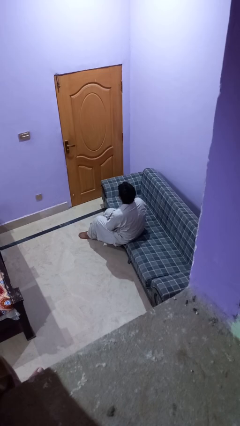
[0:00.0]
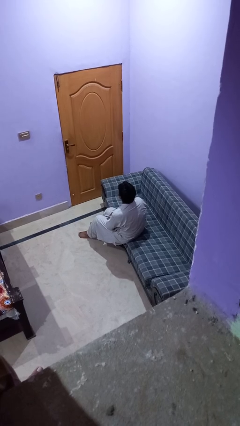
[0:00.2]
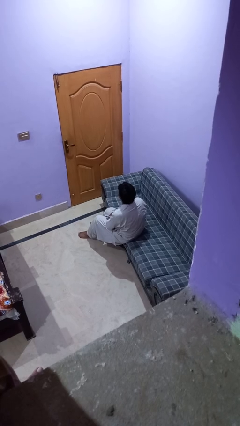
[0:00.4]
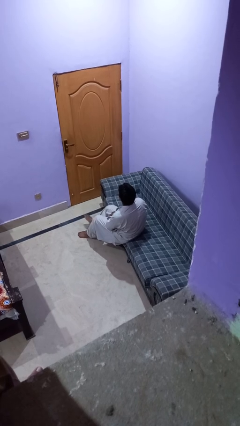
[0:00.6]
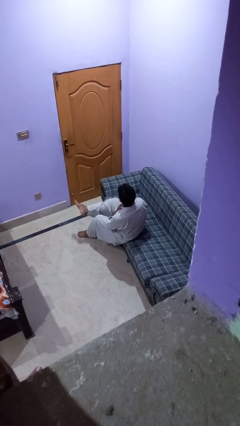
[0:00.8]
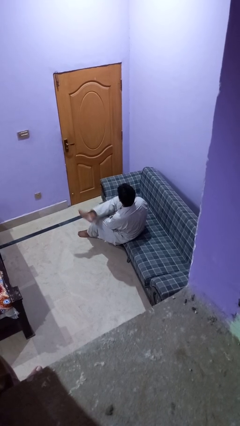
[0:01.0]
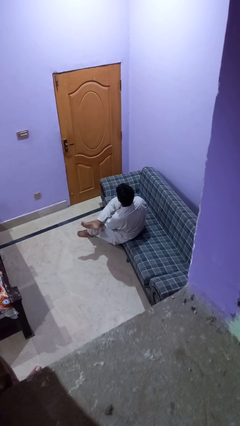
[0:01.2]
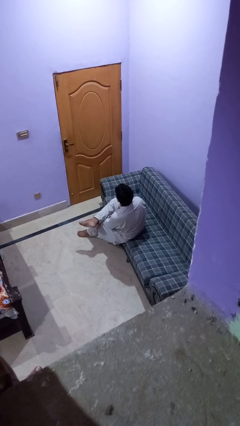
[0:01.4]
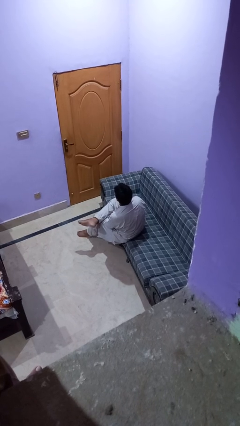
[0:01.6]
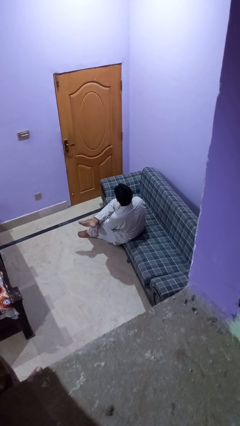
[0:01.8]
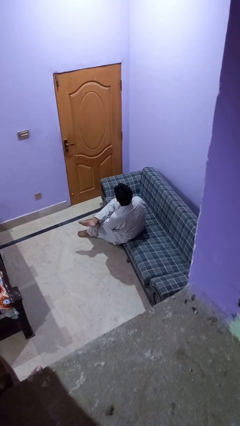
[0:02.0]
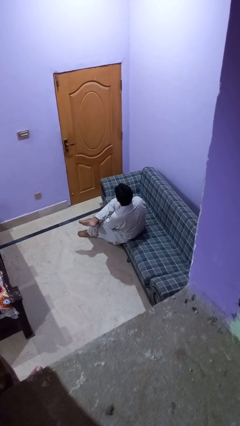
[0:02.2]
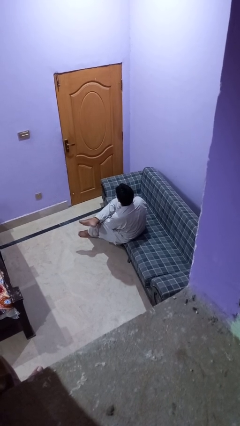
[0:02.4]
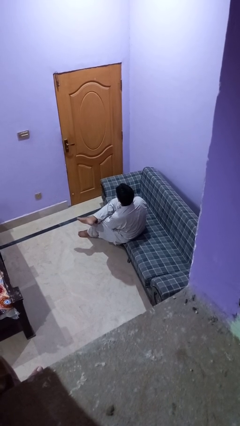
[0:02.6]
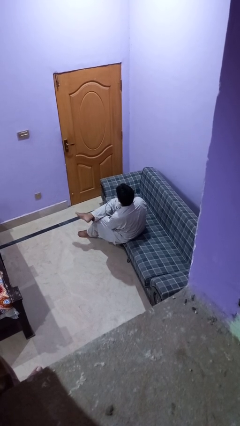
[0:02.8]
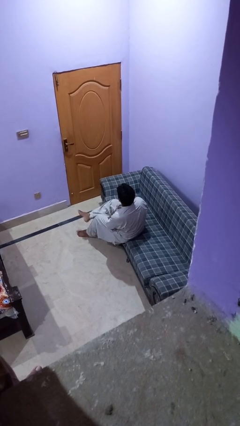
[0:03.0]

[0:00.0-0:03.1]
person crosses legs

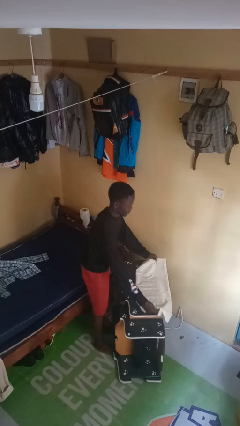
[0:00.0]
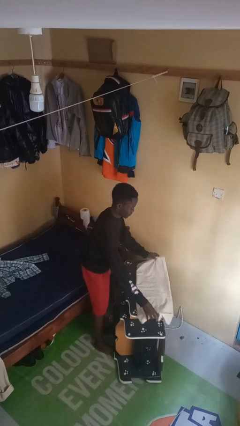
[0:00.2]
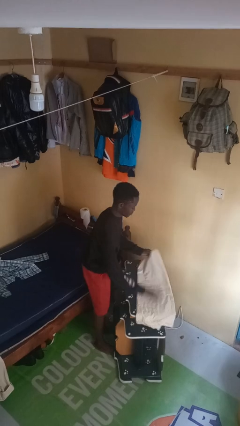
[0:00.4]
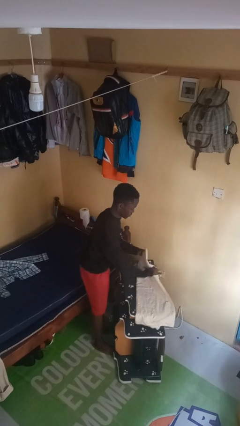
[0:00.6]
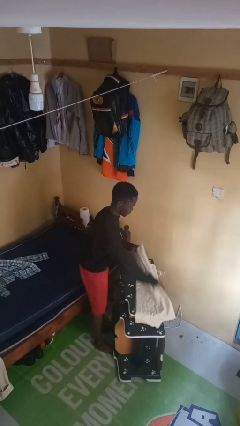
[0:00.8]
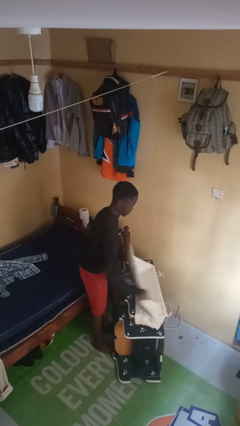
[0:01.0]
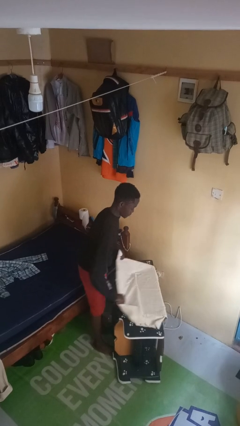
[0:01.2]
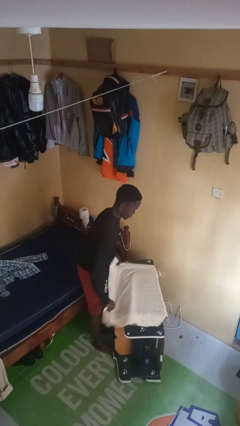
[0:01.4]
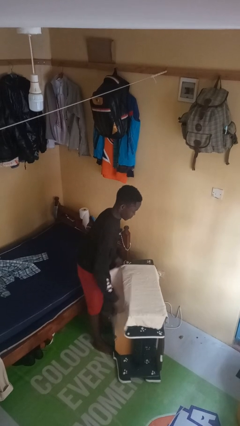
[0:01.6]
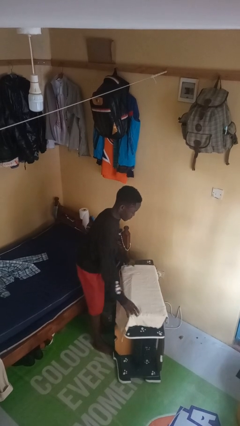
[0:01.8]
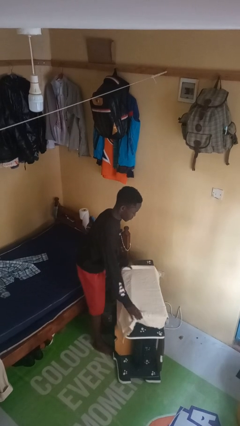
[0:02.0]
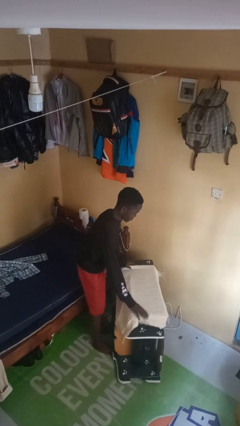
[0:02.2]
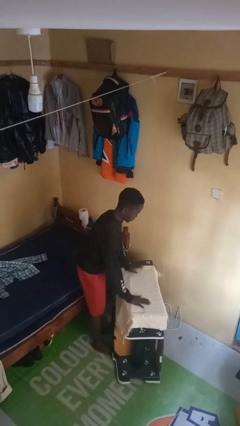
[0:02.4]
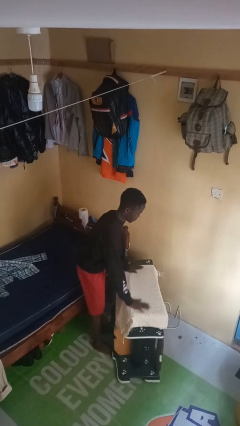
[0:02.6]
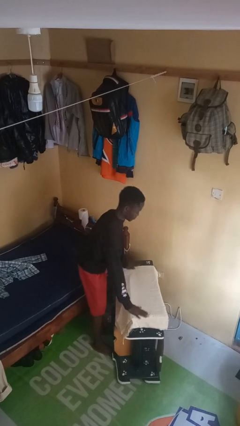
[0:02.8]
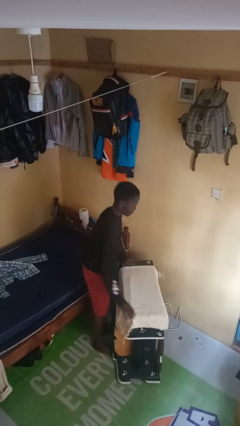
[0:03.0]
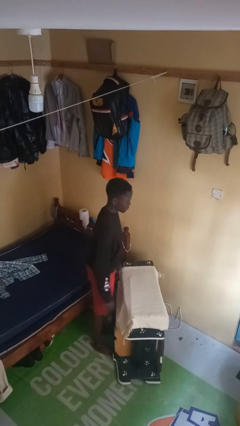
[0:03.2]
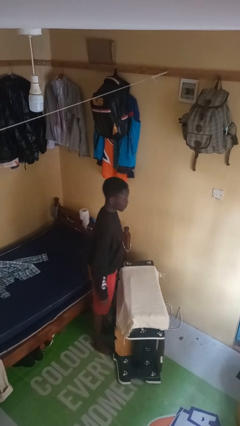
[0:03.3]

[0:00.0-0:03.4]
person spreads tablecloth

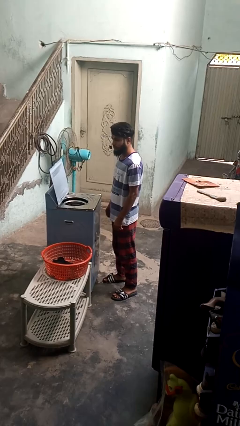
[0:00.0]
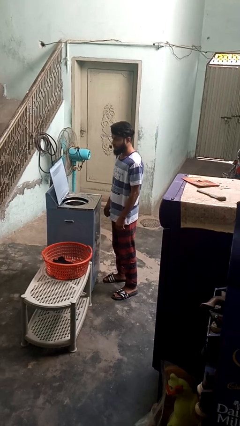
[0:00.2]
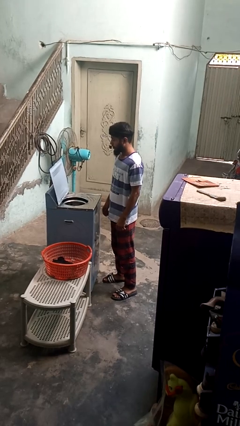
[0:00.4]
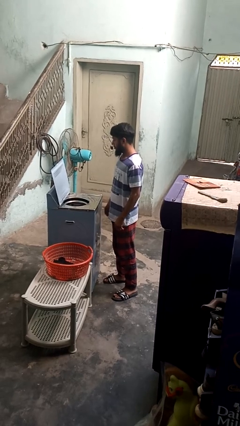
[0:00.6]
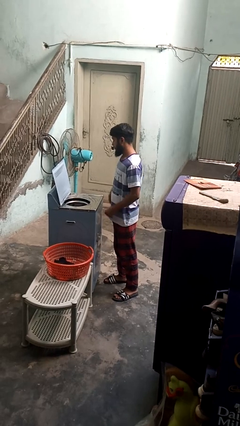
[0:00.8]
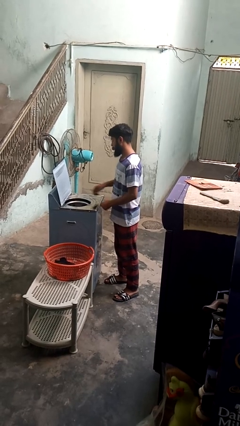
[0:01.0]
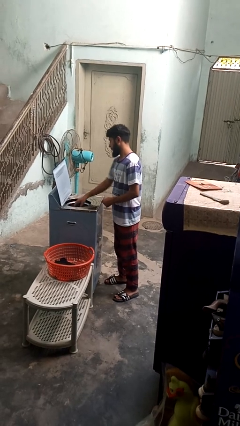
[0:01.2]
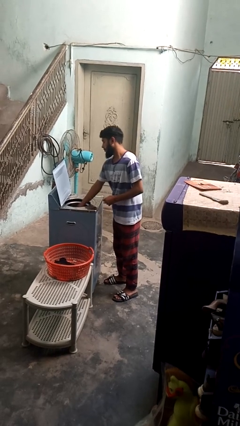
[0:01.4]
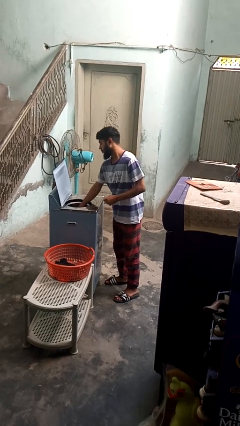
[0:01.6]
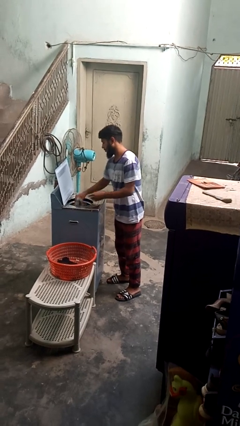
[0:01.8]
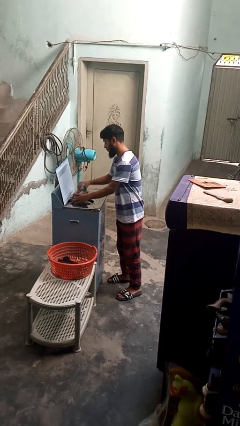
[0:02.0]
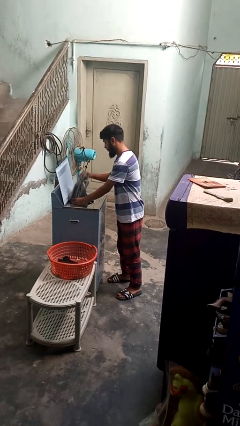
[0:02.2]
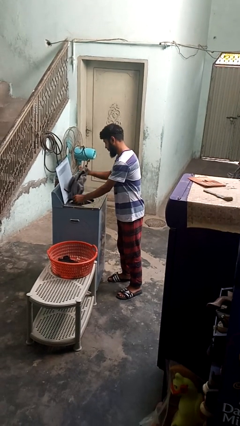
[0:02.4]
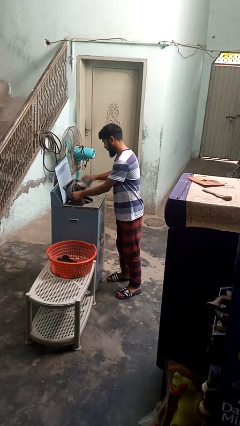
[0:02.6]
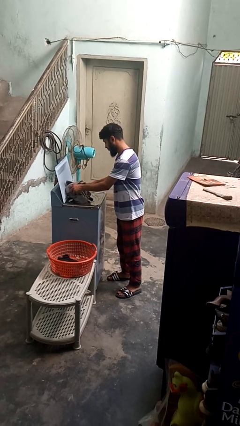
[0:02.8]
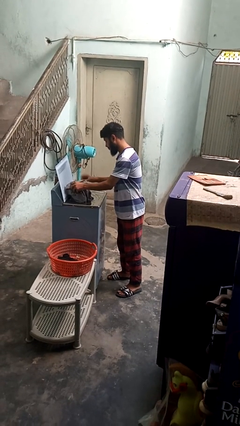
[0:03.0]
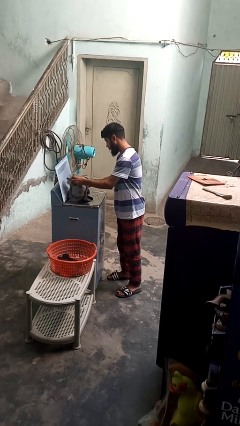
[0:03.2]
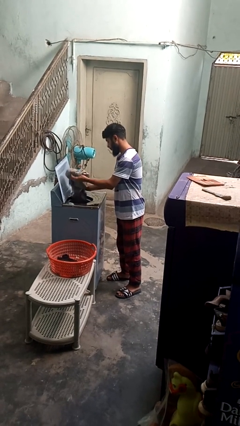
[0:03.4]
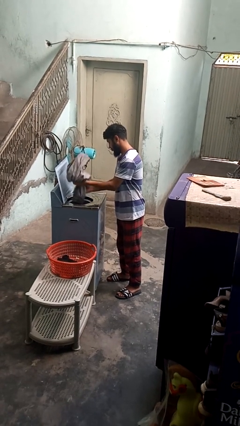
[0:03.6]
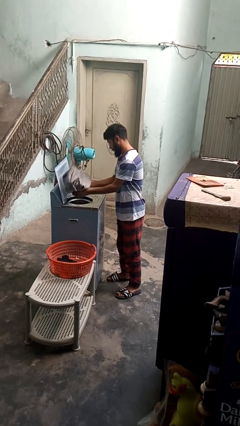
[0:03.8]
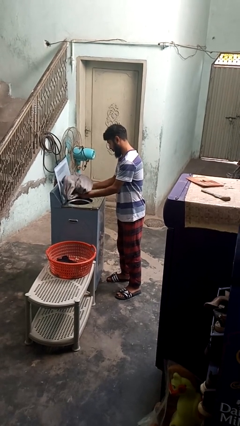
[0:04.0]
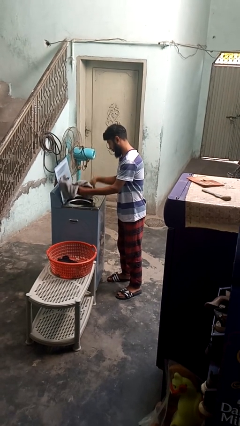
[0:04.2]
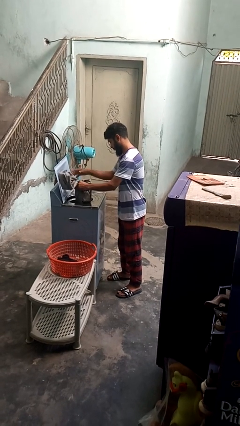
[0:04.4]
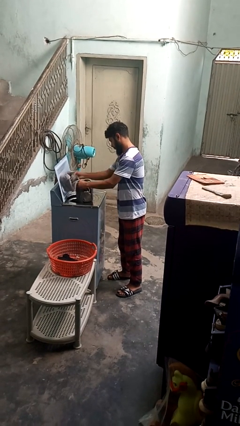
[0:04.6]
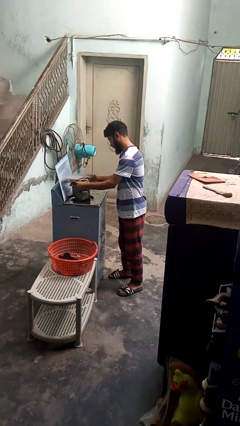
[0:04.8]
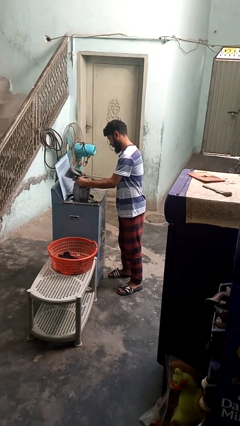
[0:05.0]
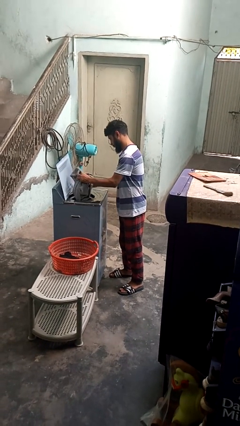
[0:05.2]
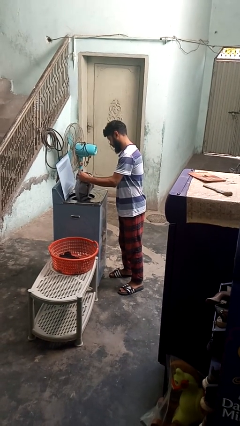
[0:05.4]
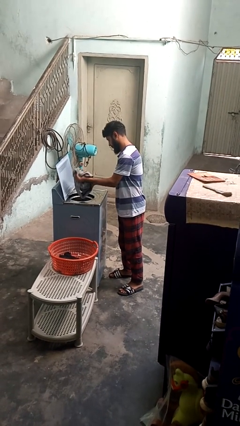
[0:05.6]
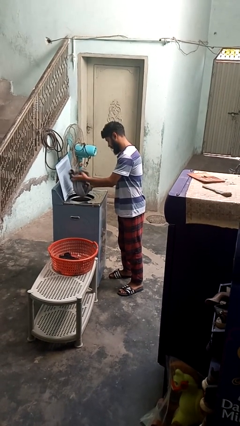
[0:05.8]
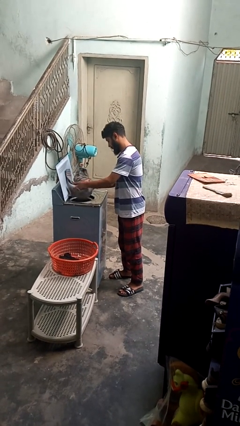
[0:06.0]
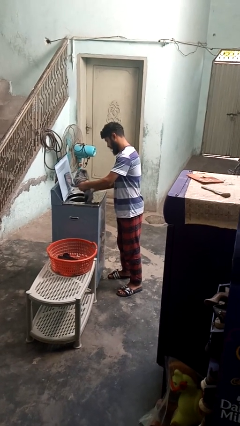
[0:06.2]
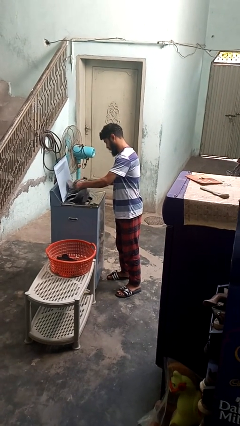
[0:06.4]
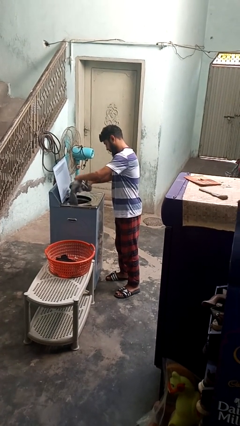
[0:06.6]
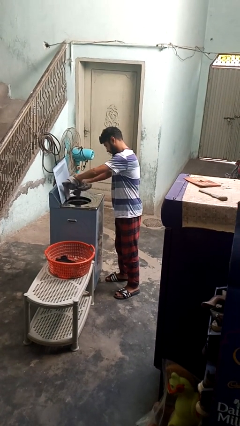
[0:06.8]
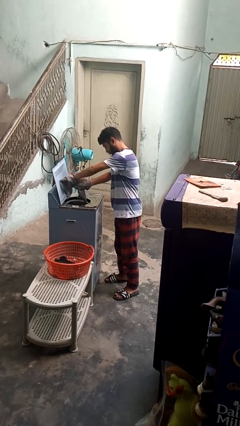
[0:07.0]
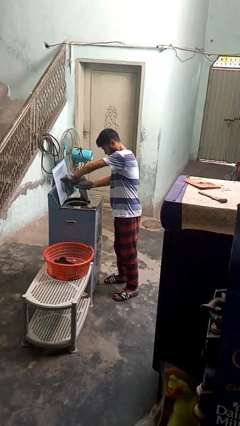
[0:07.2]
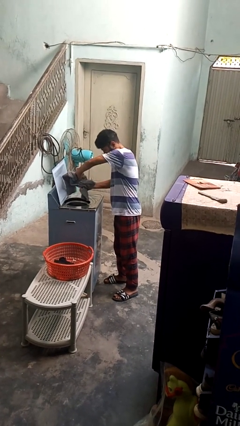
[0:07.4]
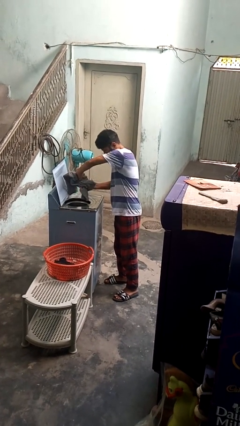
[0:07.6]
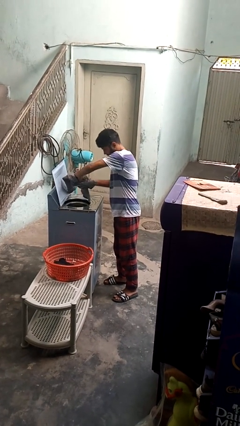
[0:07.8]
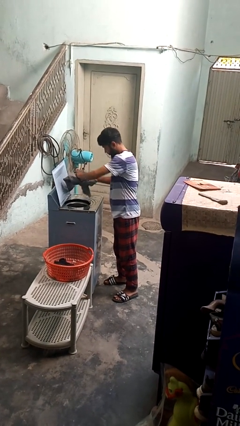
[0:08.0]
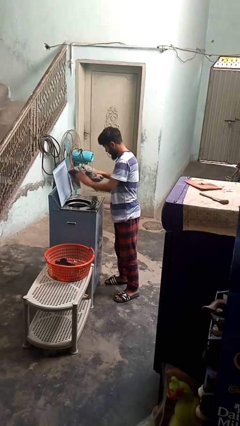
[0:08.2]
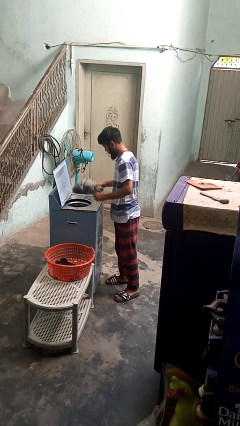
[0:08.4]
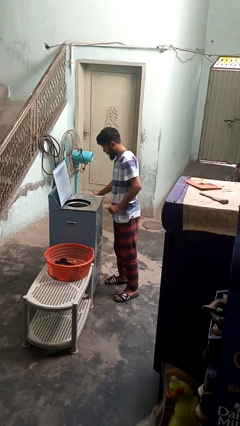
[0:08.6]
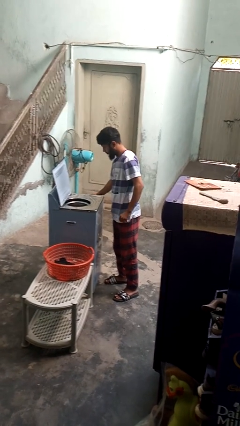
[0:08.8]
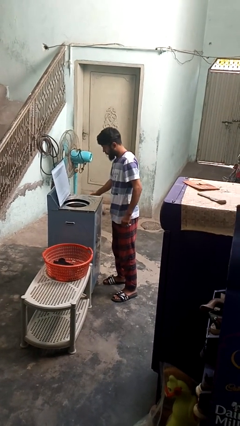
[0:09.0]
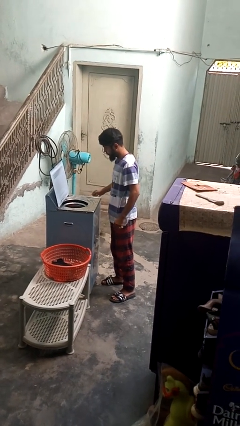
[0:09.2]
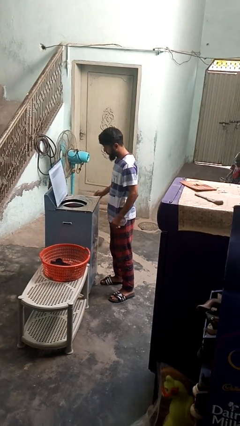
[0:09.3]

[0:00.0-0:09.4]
person unloads clotheswasher

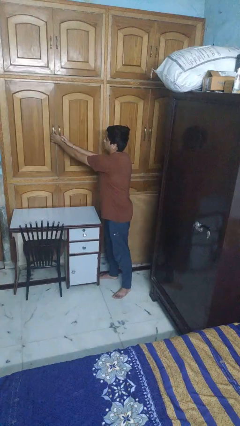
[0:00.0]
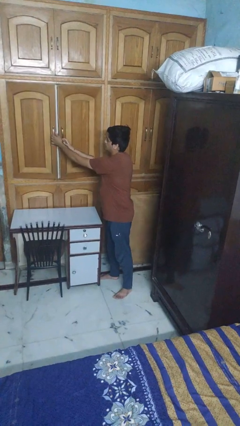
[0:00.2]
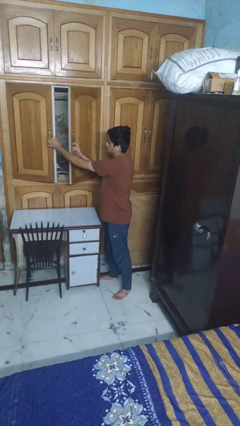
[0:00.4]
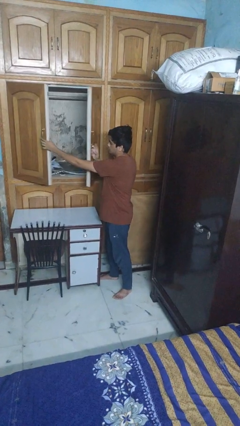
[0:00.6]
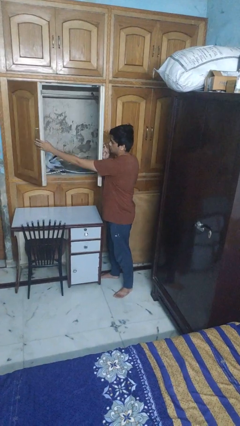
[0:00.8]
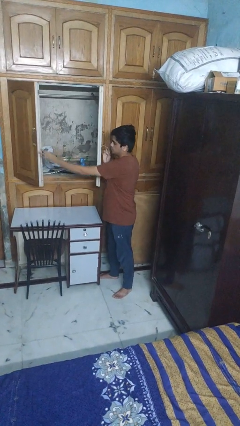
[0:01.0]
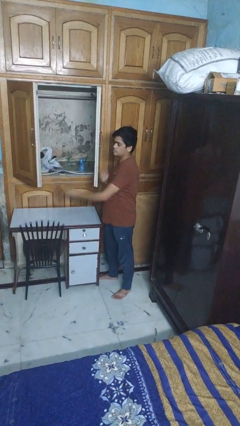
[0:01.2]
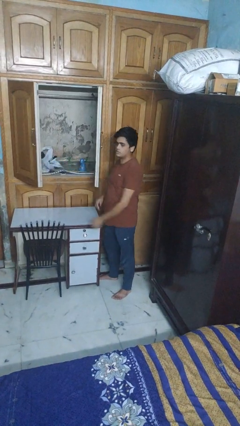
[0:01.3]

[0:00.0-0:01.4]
person opens closet door

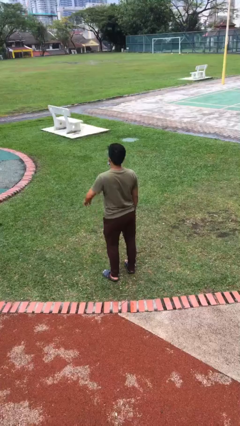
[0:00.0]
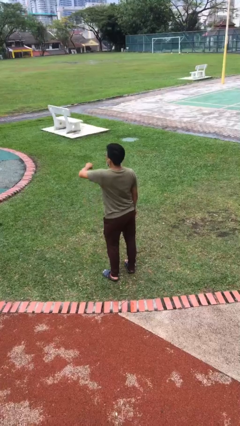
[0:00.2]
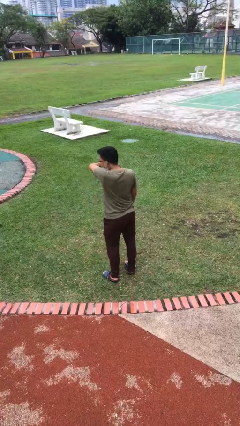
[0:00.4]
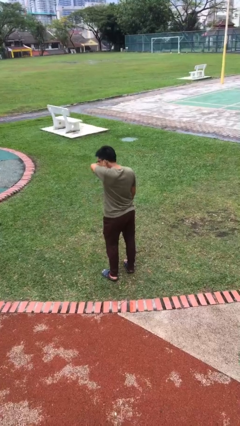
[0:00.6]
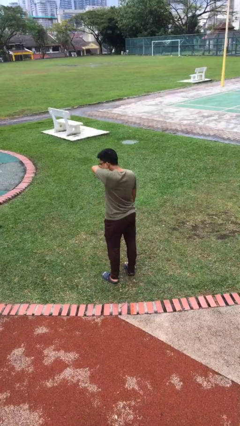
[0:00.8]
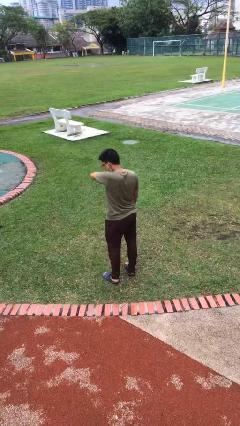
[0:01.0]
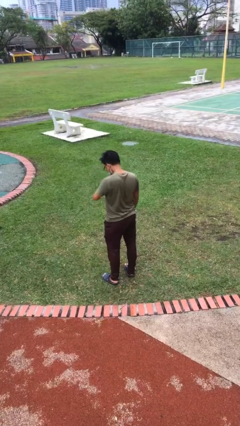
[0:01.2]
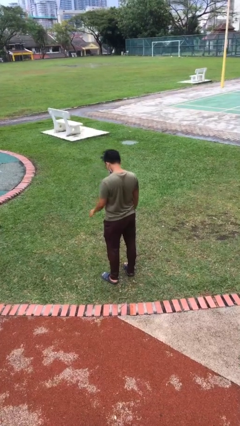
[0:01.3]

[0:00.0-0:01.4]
person sneezes into arm
